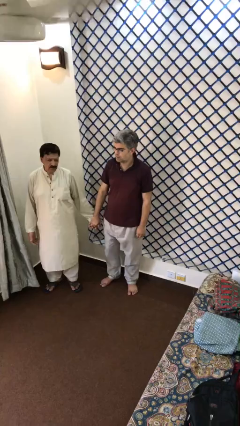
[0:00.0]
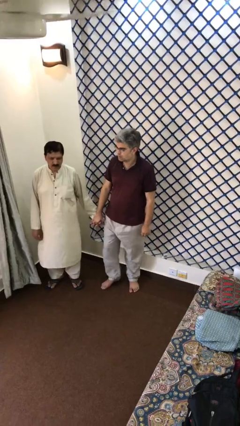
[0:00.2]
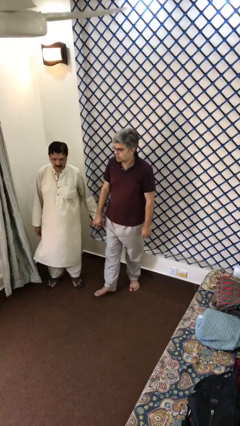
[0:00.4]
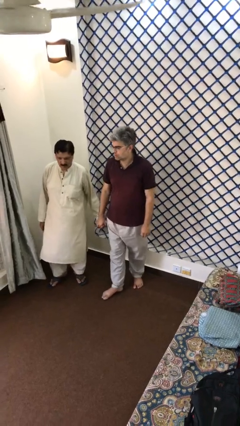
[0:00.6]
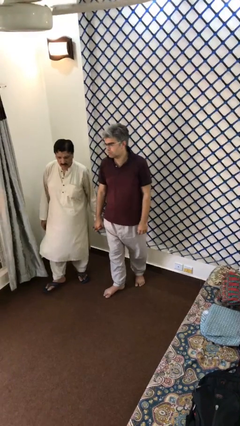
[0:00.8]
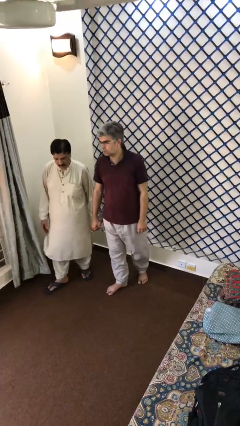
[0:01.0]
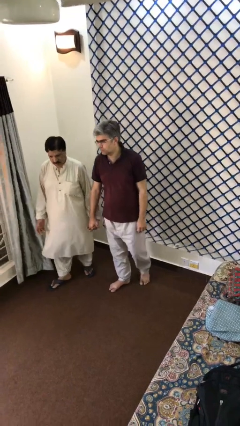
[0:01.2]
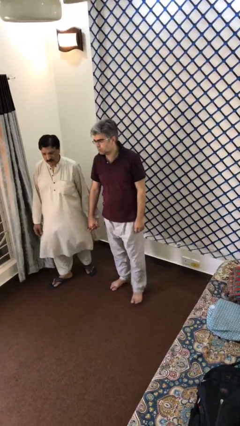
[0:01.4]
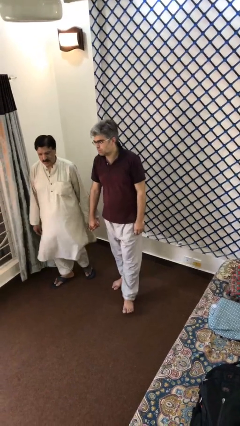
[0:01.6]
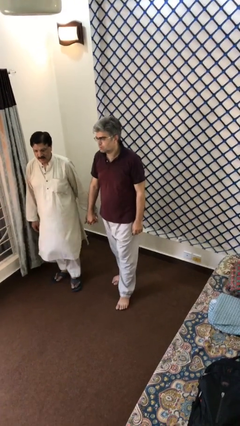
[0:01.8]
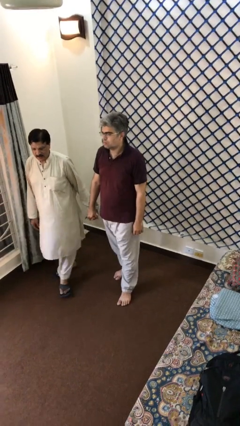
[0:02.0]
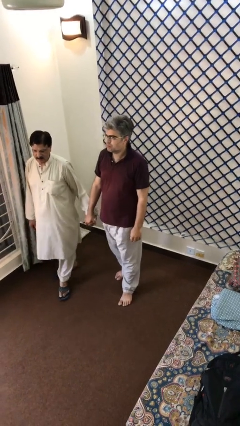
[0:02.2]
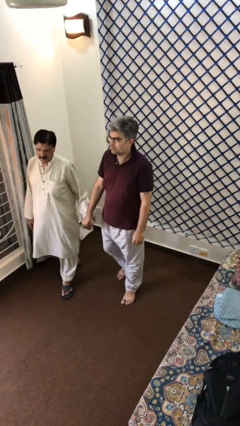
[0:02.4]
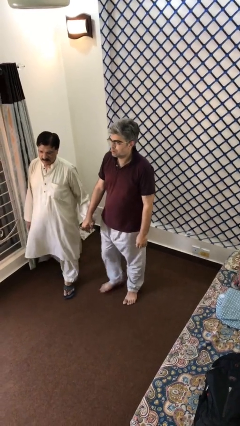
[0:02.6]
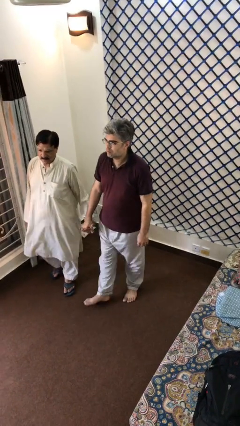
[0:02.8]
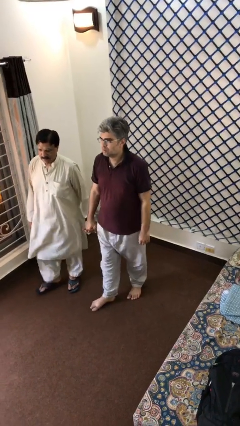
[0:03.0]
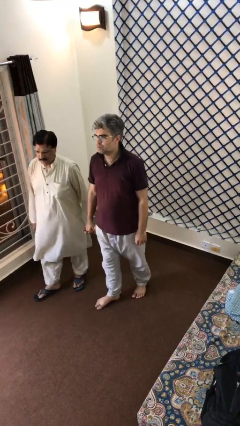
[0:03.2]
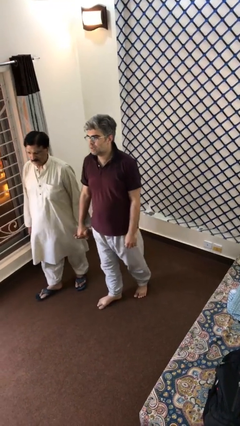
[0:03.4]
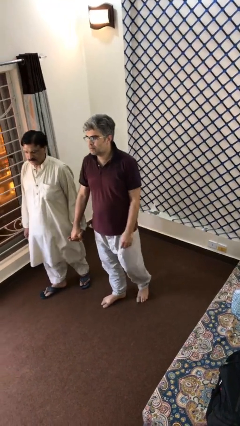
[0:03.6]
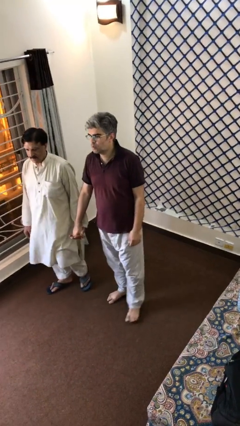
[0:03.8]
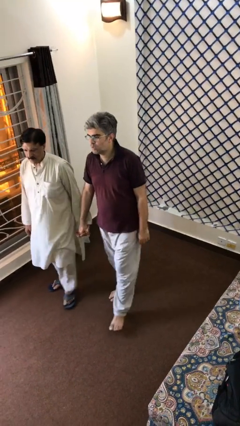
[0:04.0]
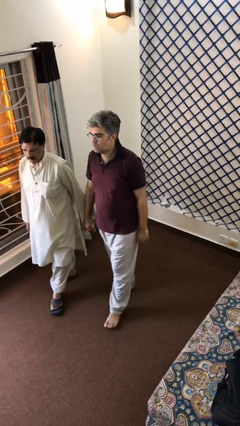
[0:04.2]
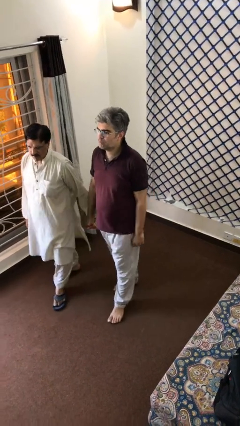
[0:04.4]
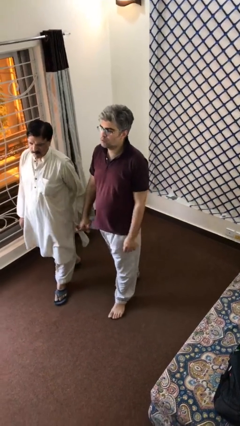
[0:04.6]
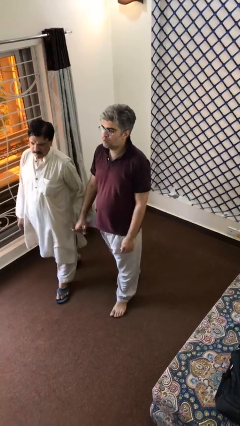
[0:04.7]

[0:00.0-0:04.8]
person holds hand

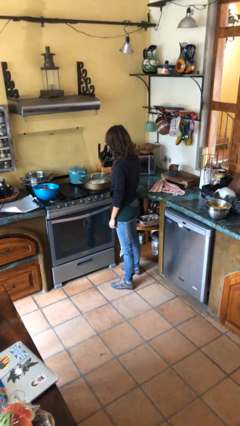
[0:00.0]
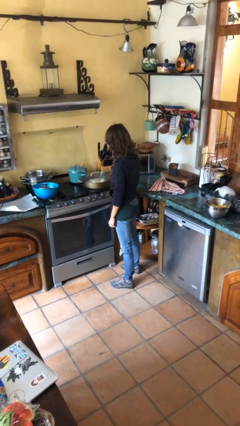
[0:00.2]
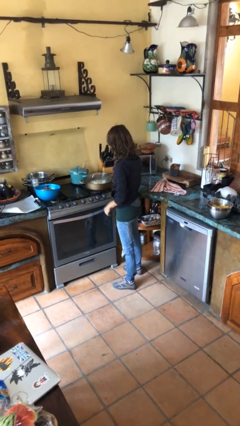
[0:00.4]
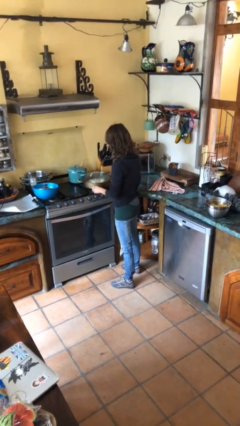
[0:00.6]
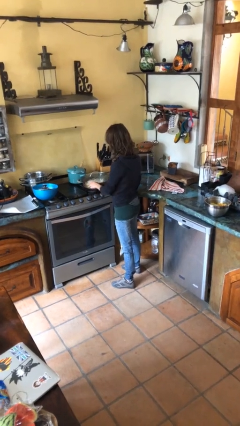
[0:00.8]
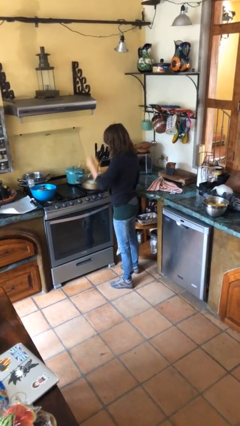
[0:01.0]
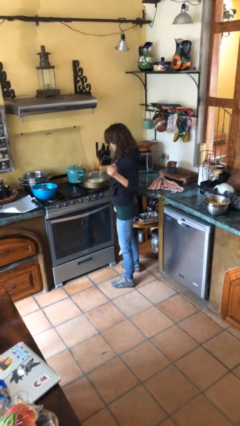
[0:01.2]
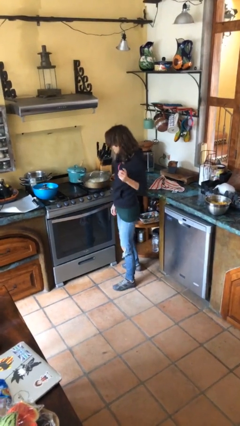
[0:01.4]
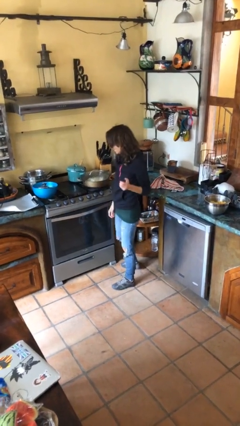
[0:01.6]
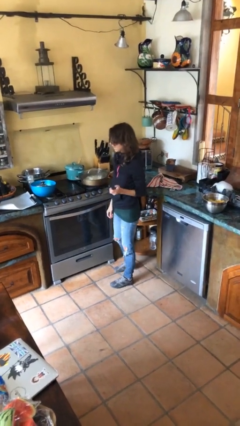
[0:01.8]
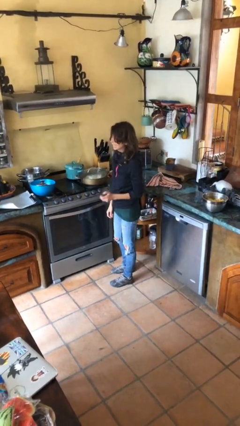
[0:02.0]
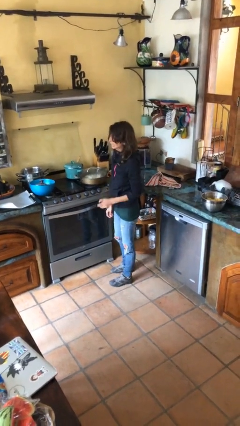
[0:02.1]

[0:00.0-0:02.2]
person burns hand

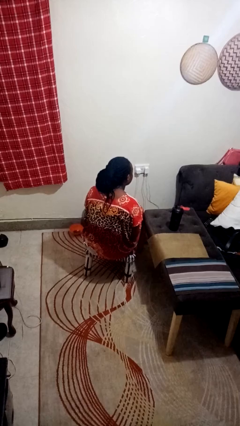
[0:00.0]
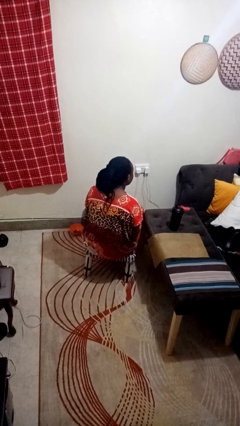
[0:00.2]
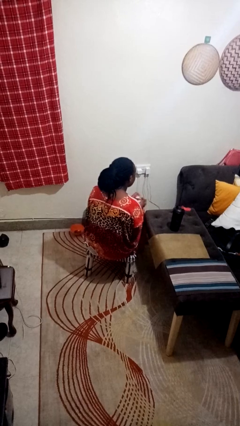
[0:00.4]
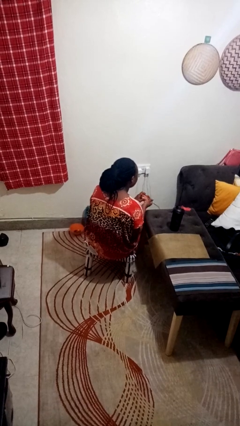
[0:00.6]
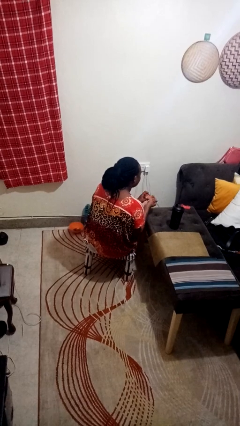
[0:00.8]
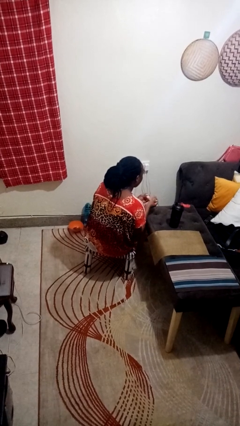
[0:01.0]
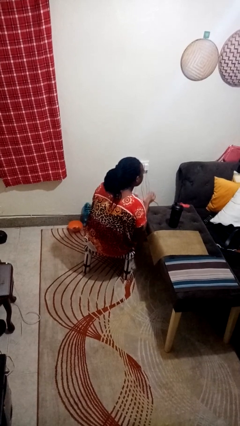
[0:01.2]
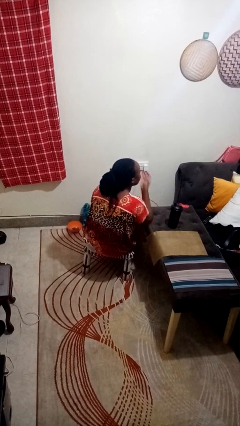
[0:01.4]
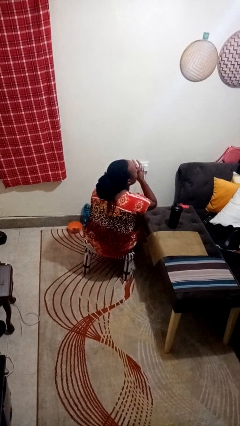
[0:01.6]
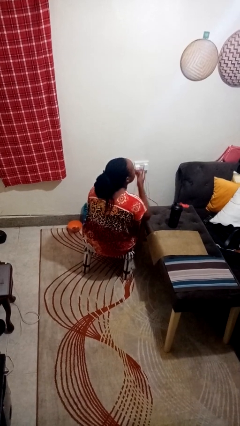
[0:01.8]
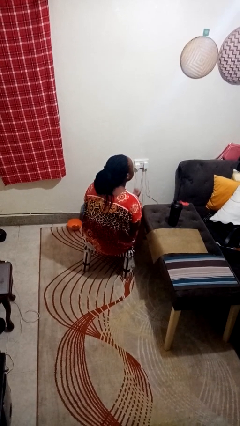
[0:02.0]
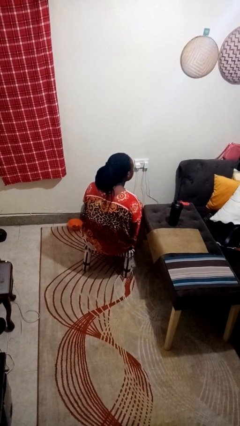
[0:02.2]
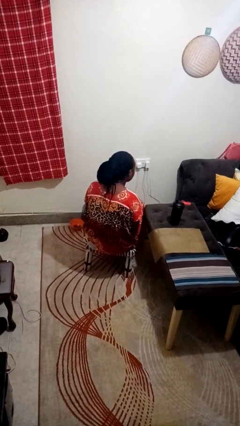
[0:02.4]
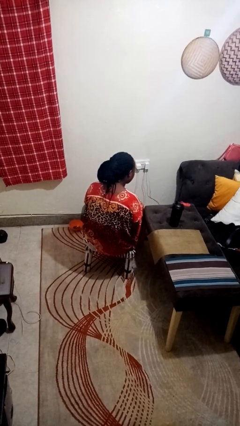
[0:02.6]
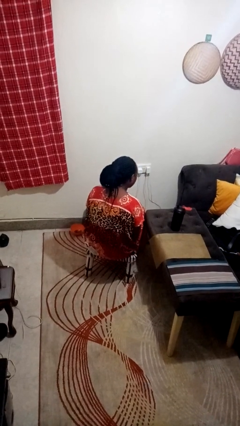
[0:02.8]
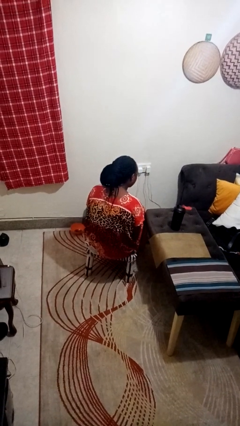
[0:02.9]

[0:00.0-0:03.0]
person takes medicine pills

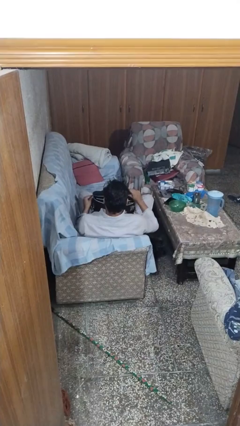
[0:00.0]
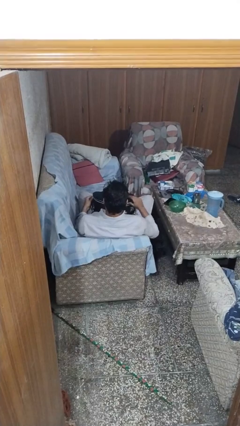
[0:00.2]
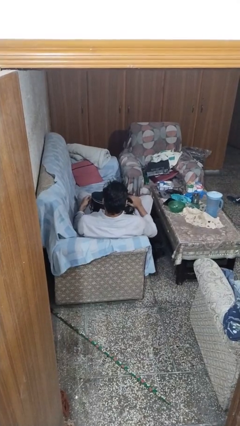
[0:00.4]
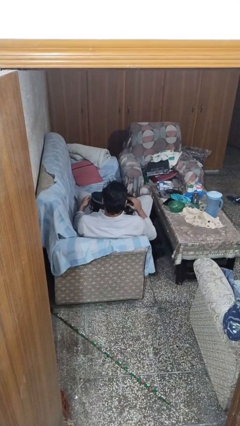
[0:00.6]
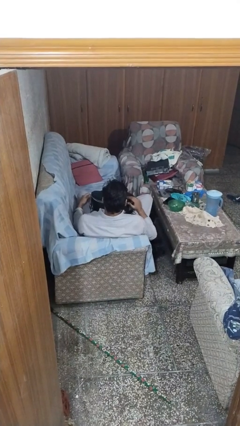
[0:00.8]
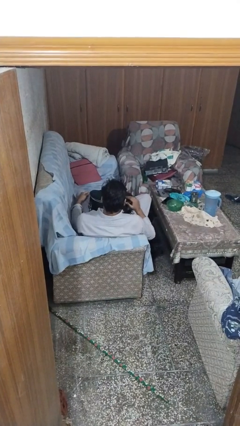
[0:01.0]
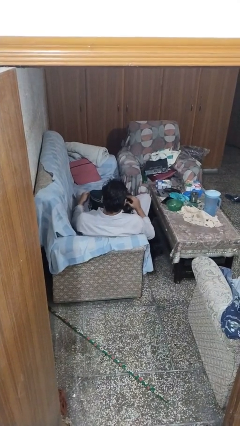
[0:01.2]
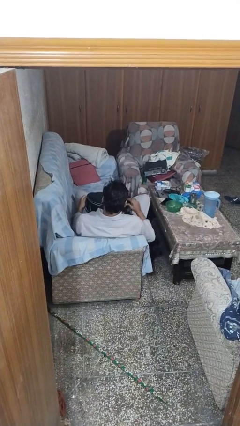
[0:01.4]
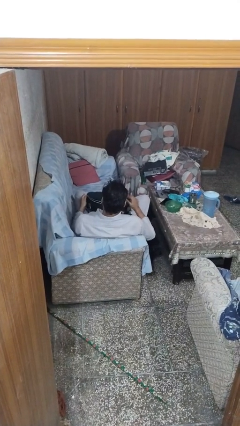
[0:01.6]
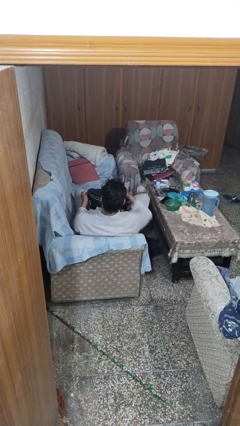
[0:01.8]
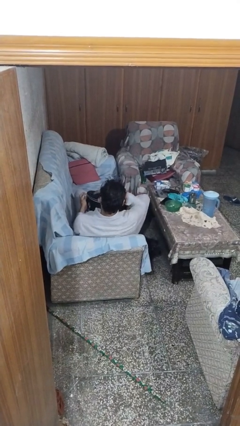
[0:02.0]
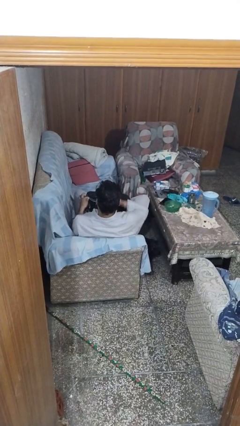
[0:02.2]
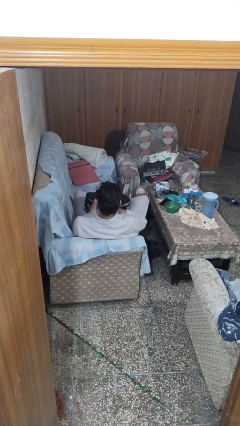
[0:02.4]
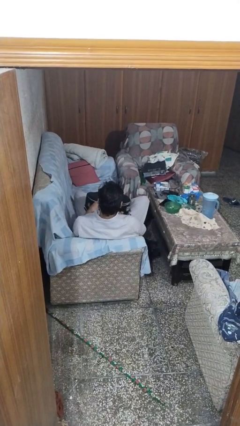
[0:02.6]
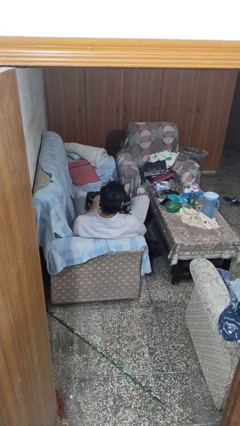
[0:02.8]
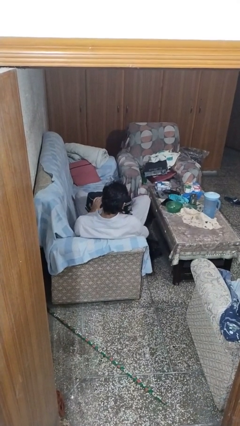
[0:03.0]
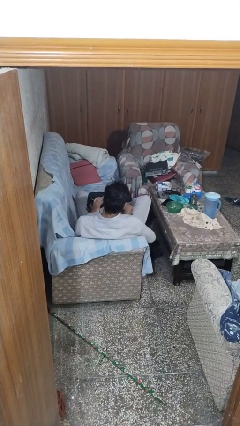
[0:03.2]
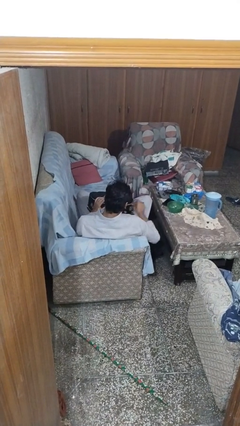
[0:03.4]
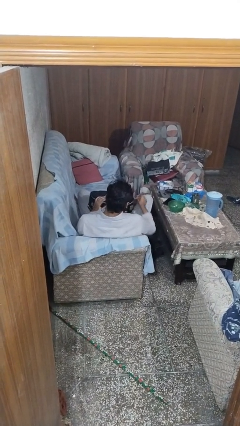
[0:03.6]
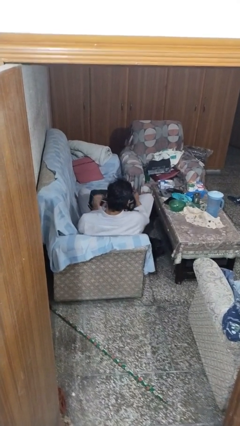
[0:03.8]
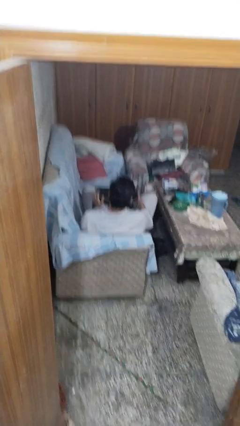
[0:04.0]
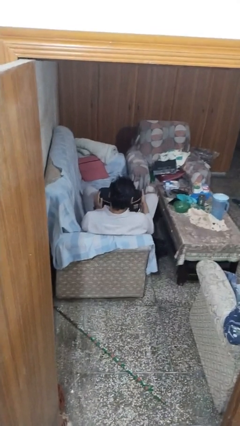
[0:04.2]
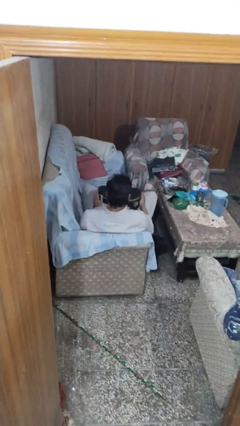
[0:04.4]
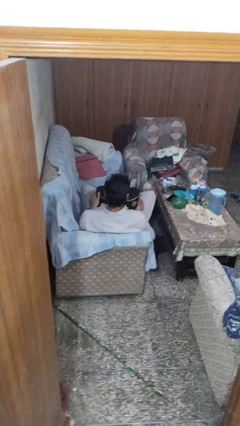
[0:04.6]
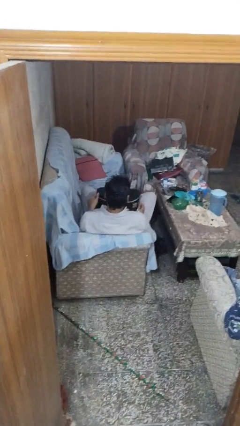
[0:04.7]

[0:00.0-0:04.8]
person closes suitcase

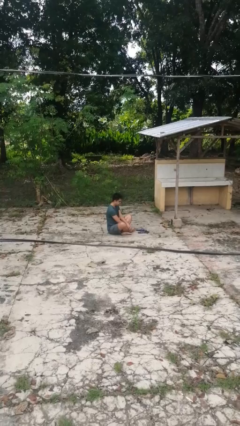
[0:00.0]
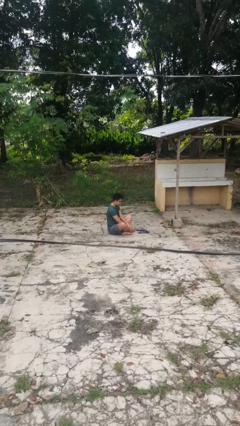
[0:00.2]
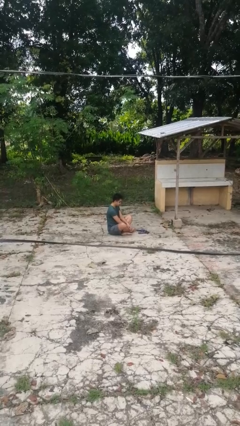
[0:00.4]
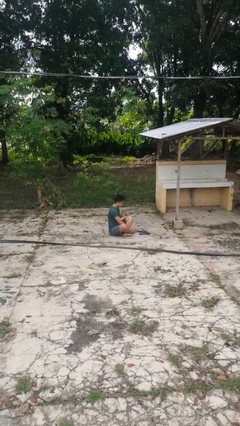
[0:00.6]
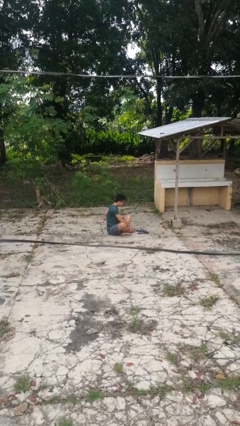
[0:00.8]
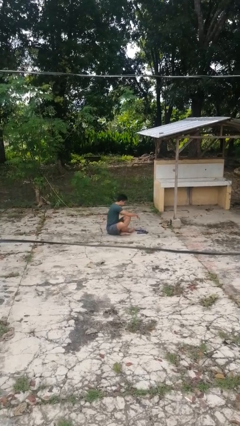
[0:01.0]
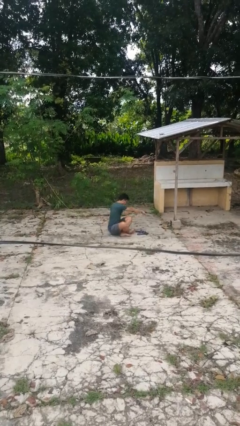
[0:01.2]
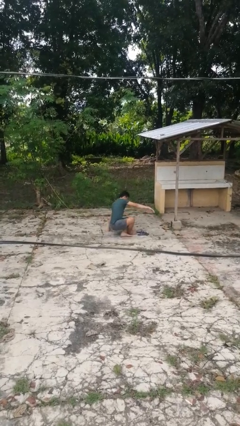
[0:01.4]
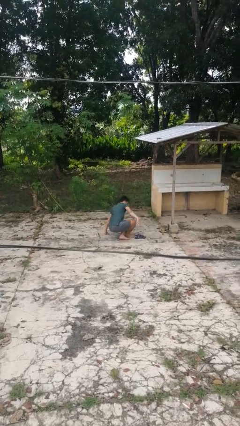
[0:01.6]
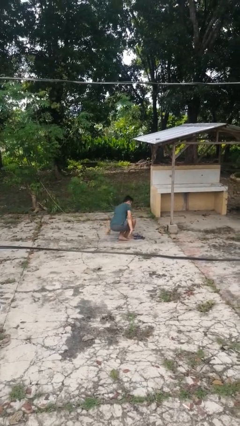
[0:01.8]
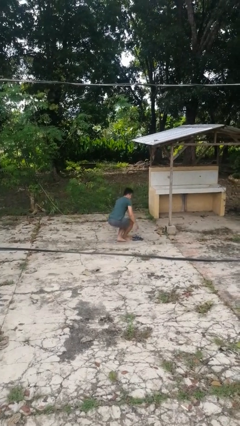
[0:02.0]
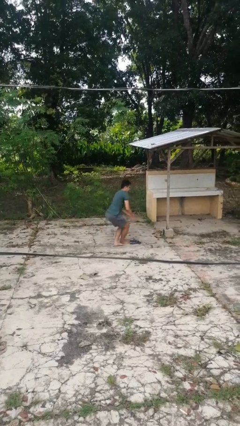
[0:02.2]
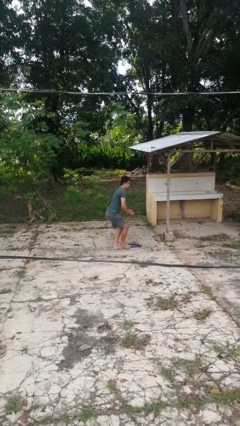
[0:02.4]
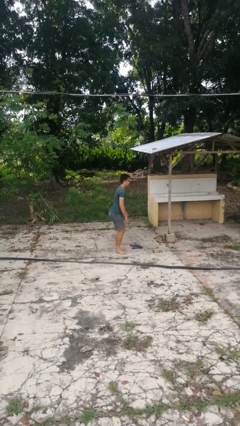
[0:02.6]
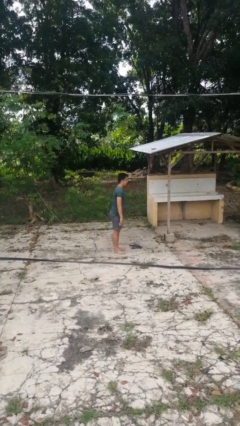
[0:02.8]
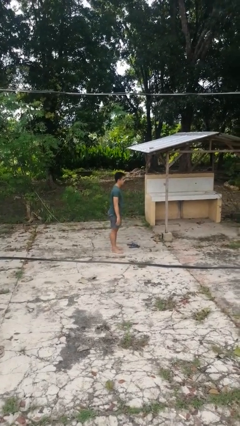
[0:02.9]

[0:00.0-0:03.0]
person stands up from floor

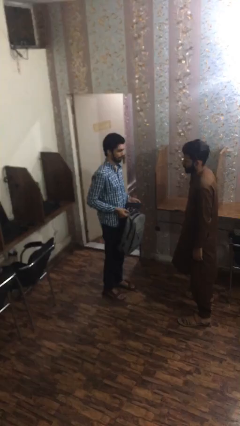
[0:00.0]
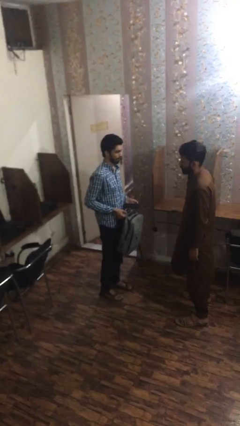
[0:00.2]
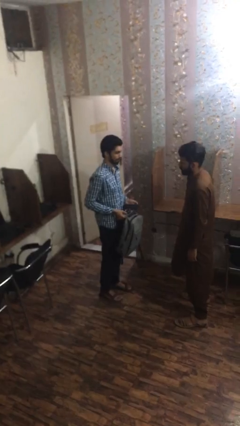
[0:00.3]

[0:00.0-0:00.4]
person transfers object to person
